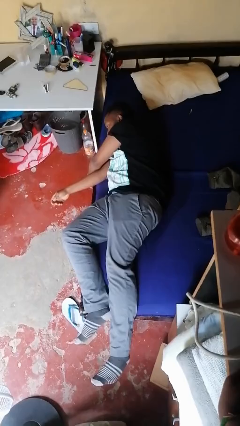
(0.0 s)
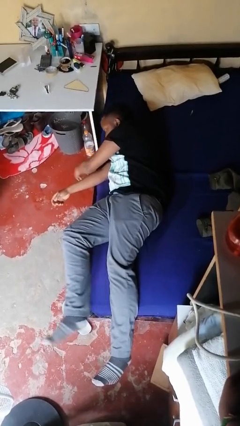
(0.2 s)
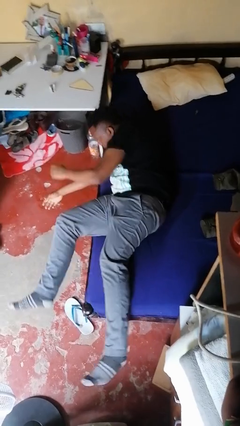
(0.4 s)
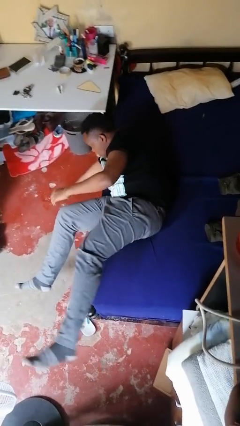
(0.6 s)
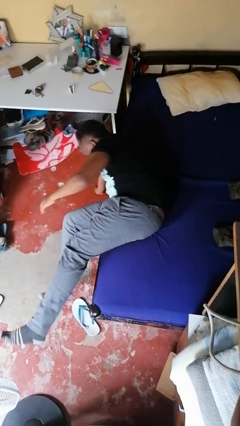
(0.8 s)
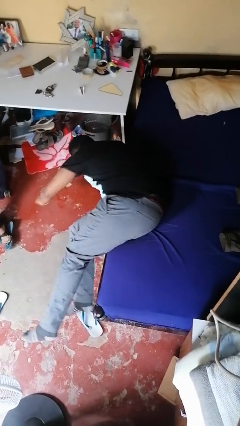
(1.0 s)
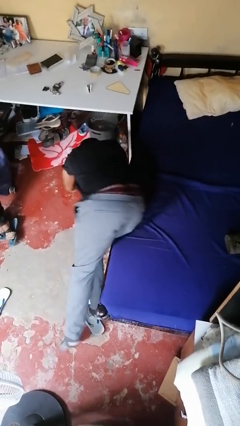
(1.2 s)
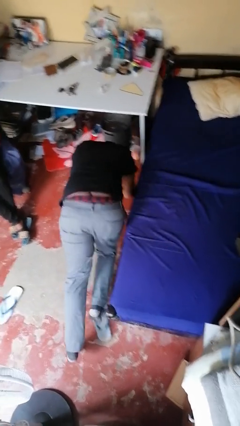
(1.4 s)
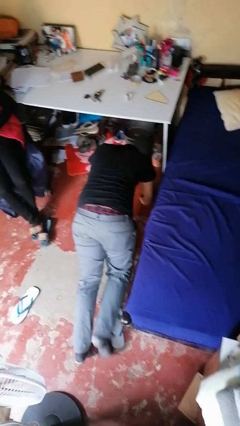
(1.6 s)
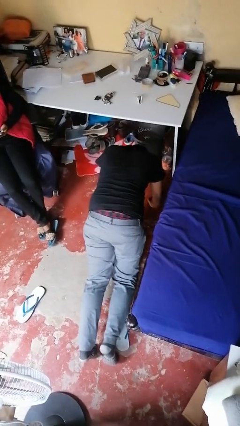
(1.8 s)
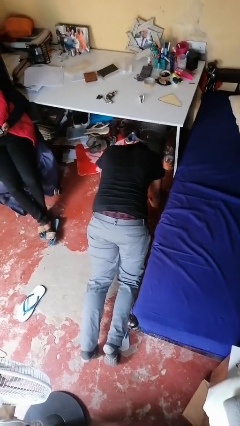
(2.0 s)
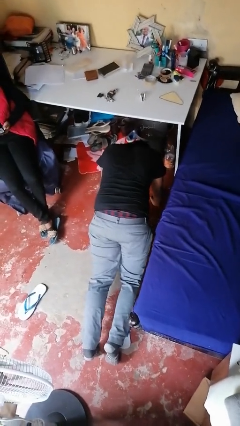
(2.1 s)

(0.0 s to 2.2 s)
person falls from bed

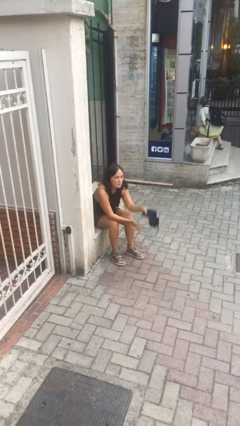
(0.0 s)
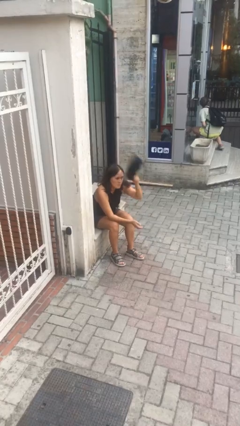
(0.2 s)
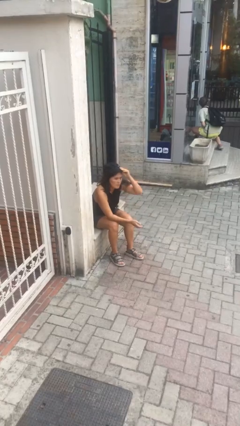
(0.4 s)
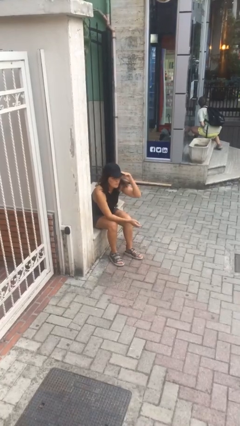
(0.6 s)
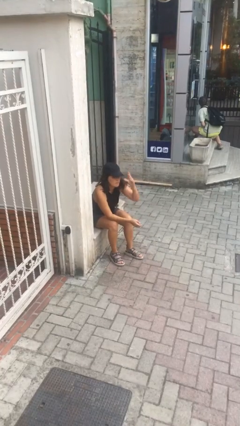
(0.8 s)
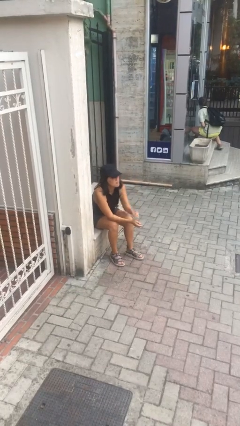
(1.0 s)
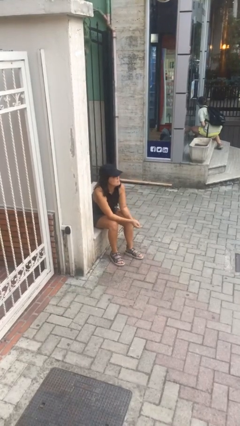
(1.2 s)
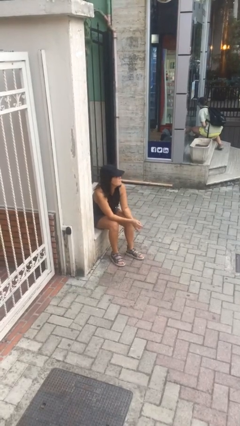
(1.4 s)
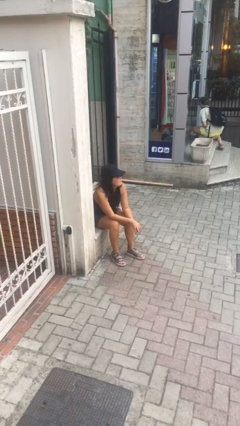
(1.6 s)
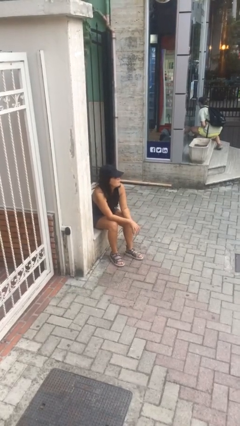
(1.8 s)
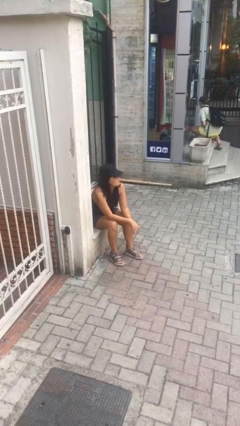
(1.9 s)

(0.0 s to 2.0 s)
person puts on hat

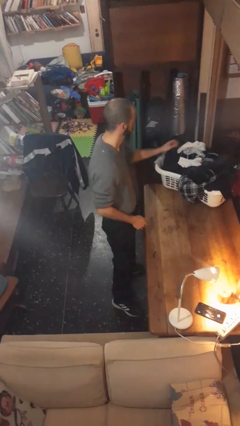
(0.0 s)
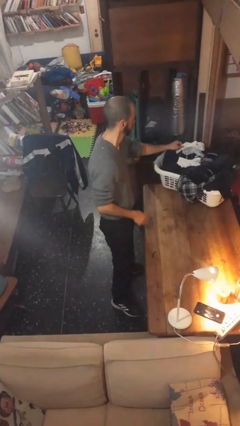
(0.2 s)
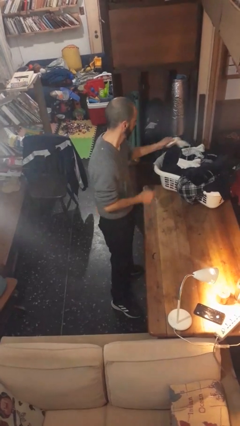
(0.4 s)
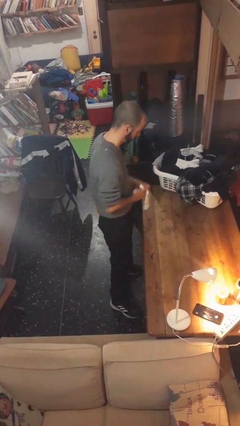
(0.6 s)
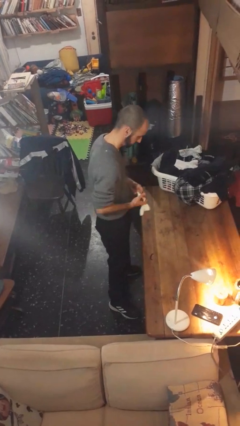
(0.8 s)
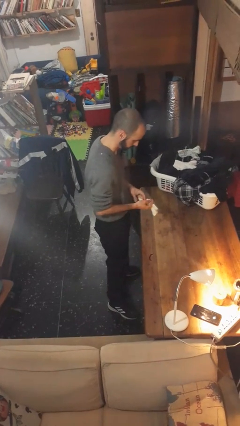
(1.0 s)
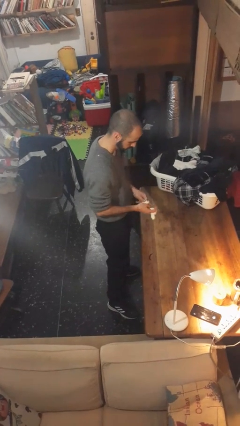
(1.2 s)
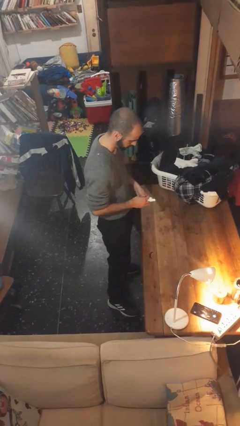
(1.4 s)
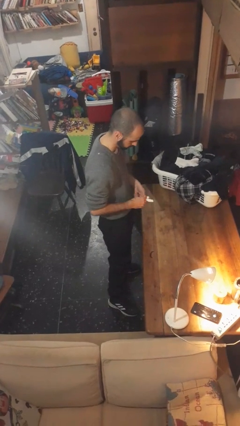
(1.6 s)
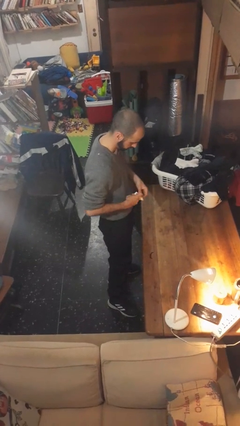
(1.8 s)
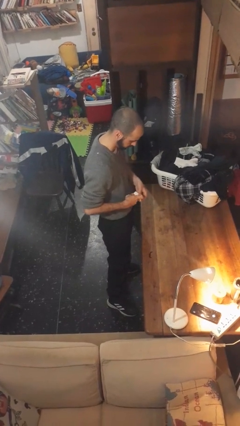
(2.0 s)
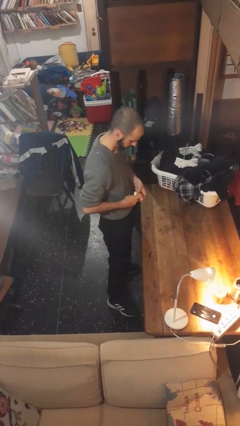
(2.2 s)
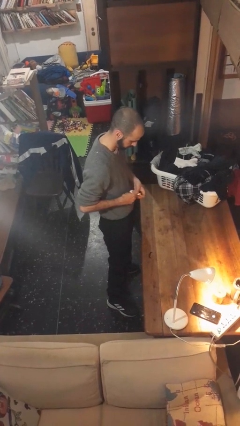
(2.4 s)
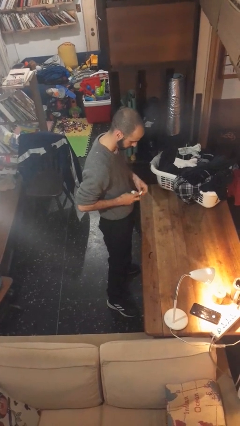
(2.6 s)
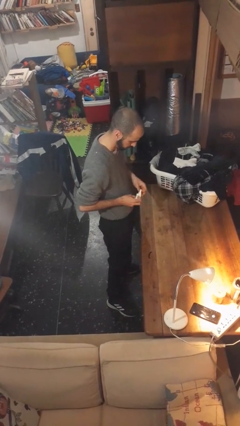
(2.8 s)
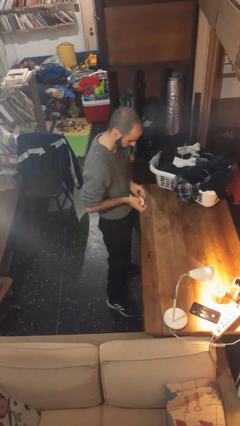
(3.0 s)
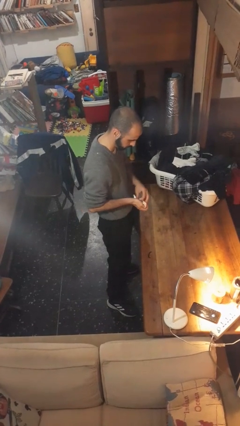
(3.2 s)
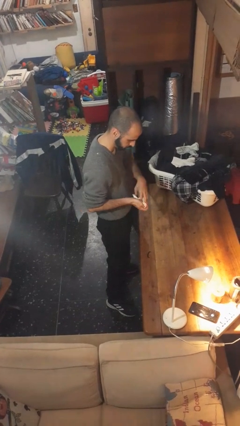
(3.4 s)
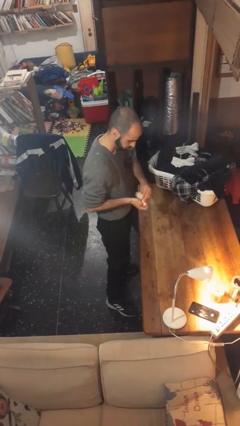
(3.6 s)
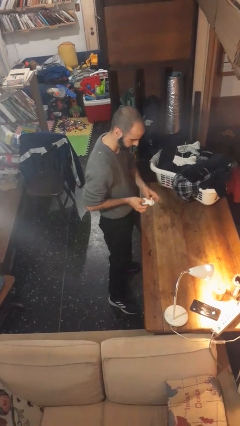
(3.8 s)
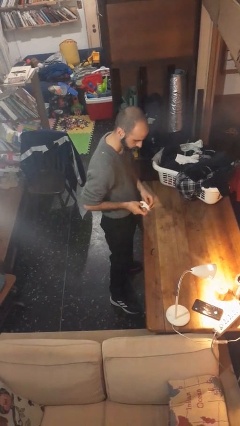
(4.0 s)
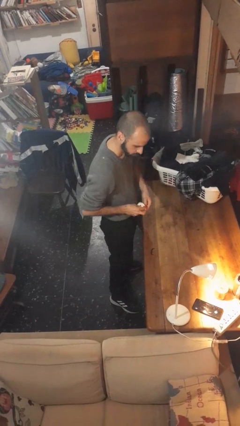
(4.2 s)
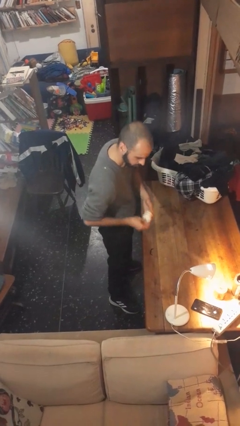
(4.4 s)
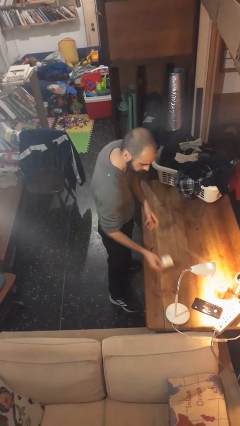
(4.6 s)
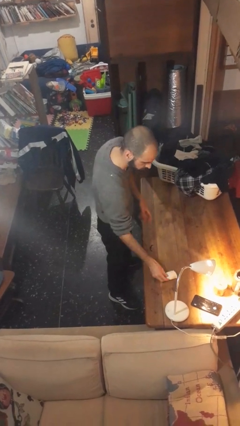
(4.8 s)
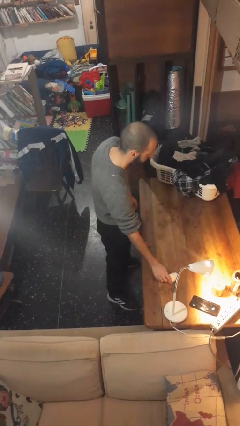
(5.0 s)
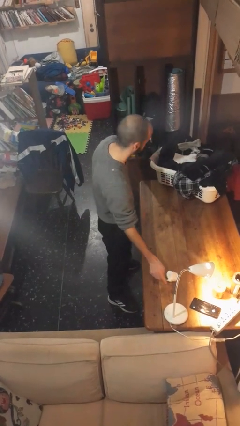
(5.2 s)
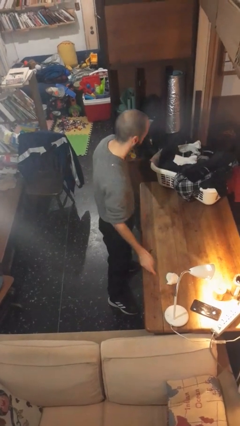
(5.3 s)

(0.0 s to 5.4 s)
person folds socks

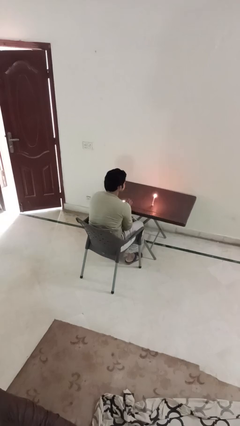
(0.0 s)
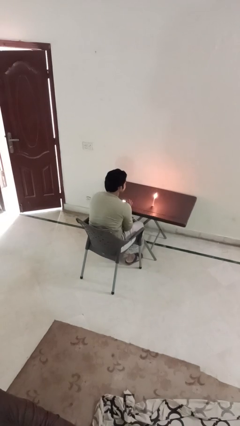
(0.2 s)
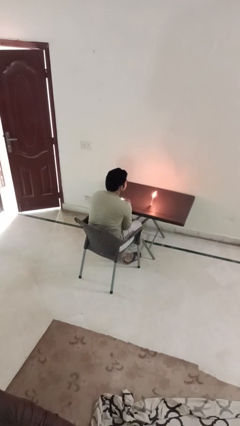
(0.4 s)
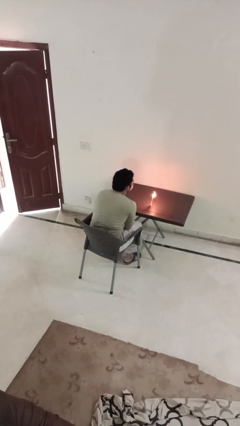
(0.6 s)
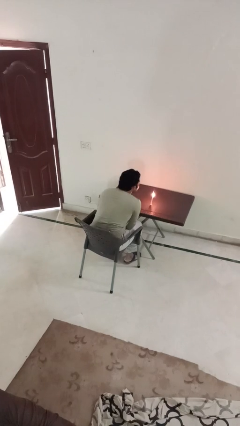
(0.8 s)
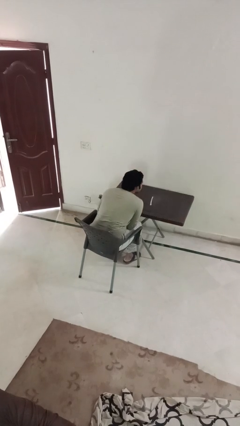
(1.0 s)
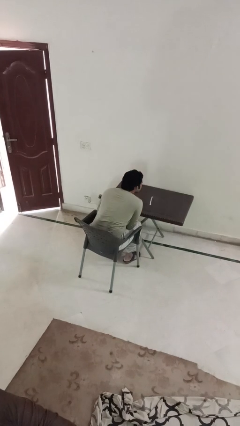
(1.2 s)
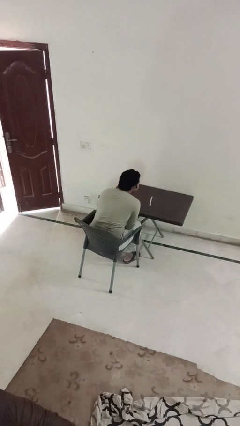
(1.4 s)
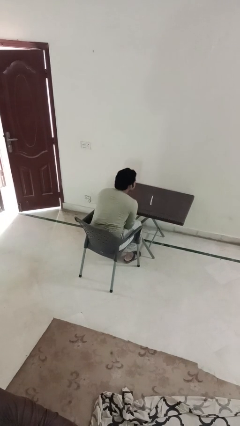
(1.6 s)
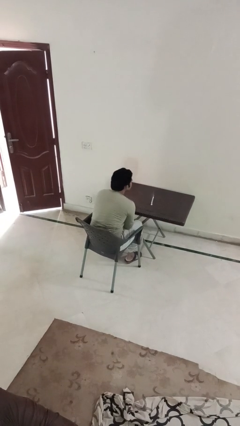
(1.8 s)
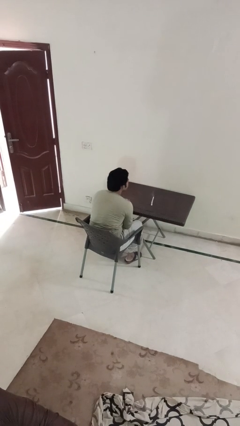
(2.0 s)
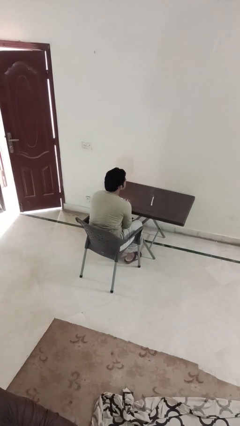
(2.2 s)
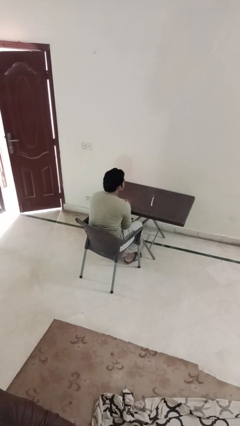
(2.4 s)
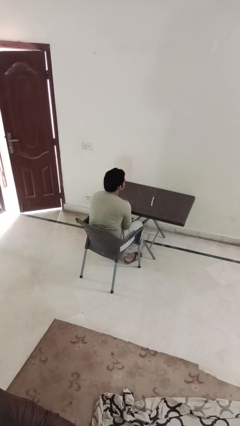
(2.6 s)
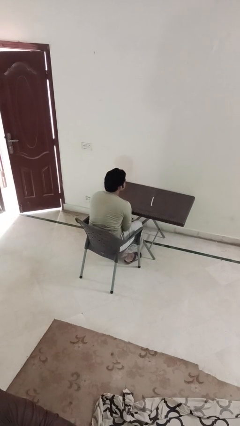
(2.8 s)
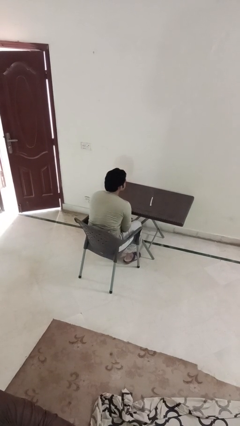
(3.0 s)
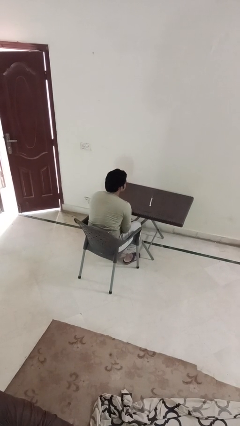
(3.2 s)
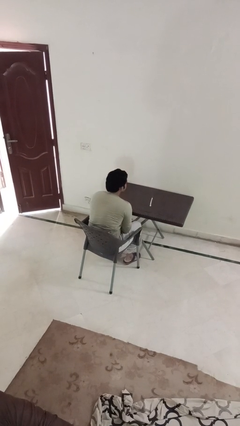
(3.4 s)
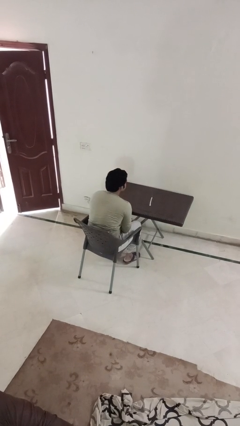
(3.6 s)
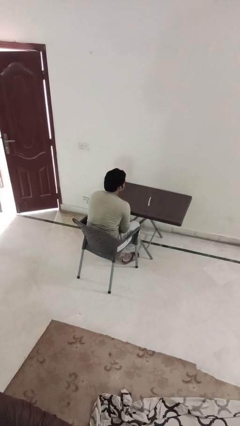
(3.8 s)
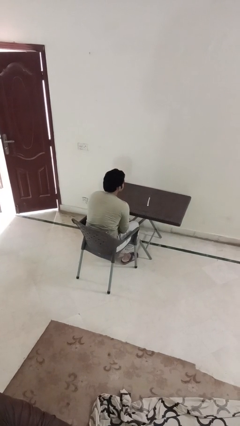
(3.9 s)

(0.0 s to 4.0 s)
person extinguishes candle

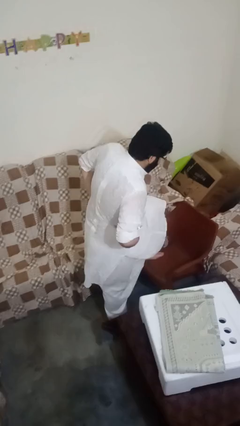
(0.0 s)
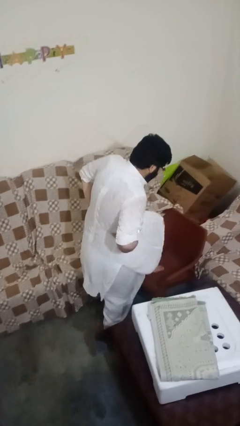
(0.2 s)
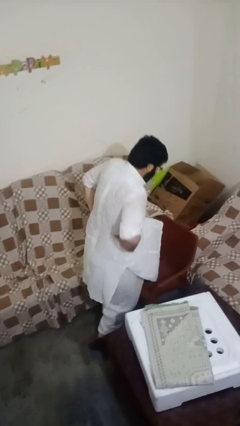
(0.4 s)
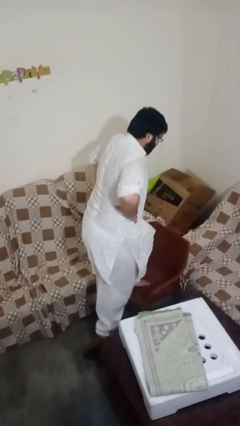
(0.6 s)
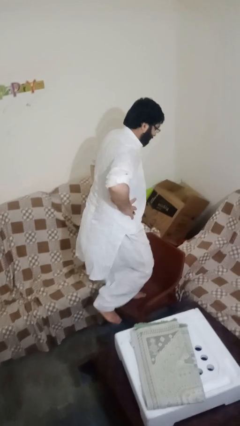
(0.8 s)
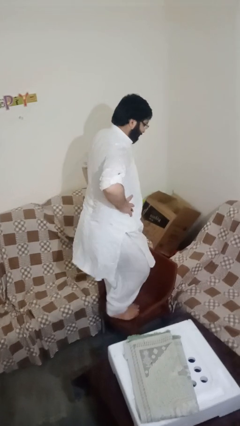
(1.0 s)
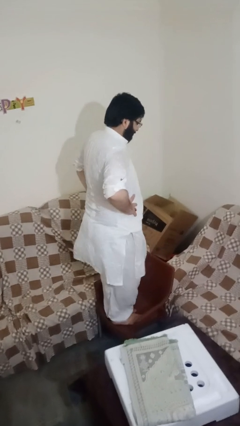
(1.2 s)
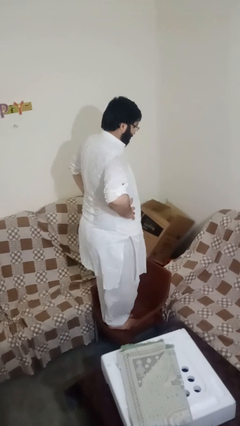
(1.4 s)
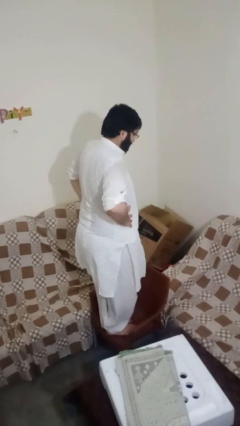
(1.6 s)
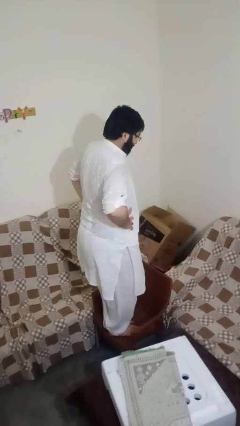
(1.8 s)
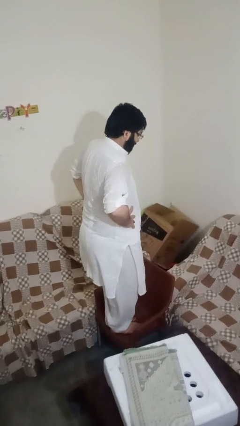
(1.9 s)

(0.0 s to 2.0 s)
person climbs on chair

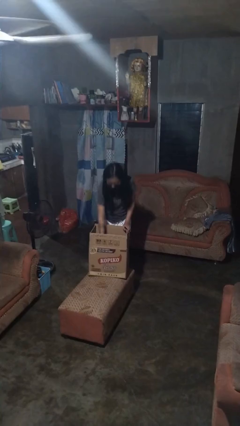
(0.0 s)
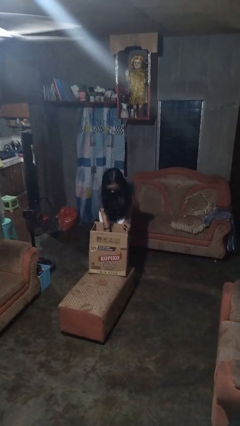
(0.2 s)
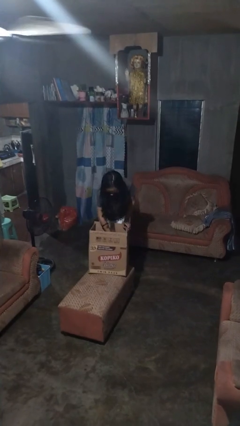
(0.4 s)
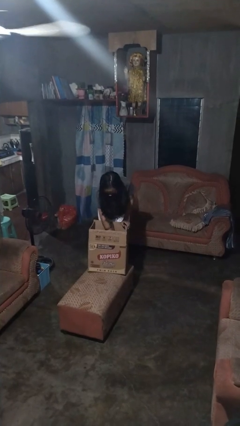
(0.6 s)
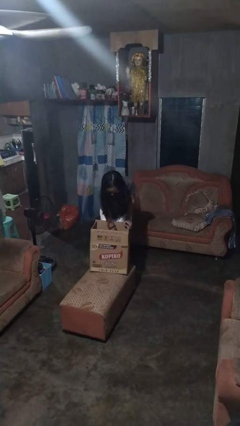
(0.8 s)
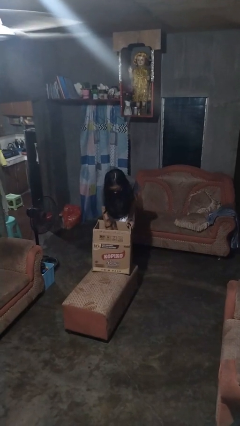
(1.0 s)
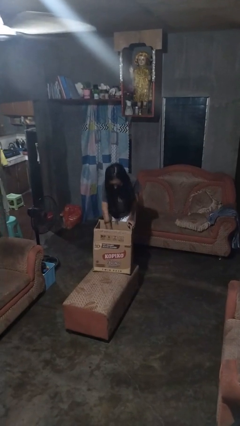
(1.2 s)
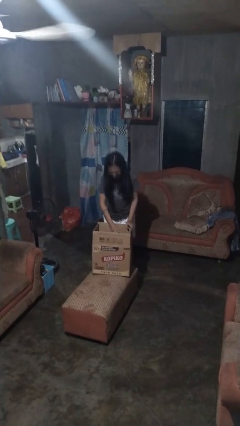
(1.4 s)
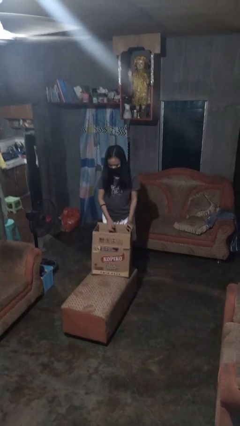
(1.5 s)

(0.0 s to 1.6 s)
person searches in box
